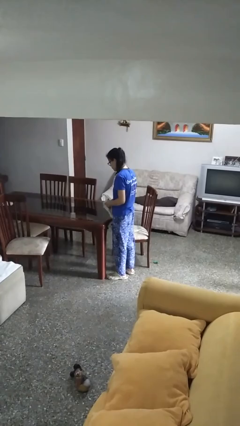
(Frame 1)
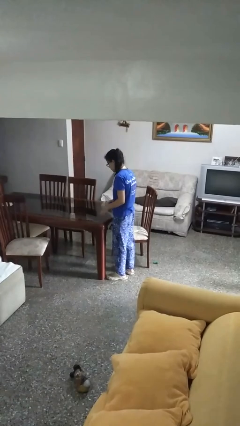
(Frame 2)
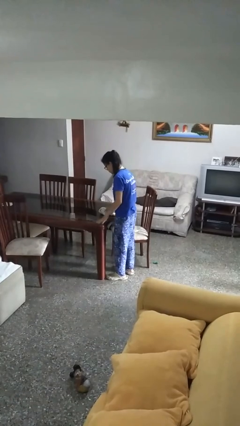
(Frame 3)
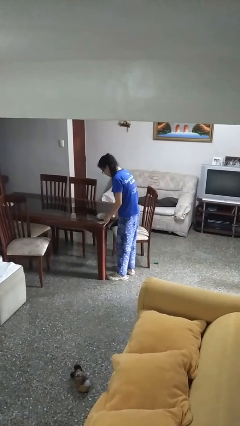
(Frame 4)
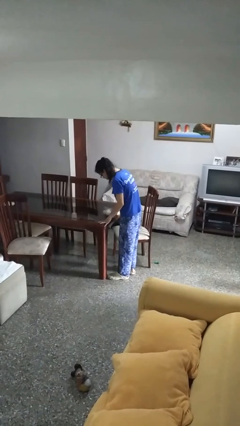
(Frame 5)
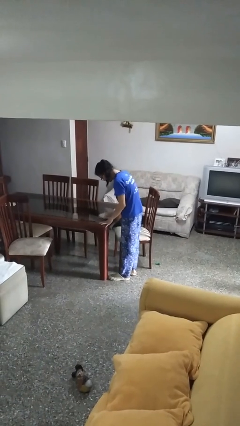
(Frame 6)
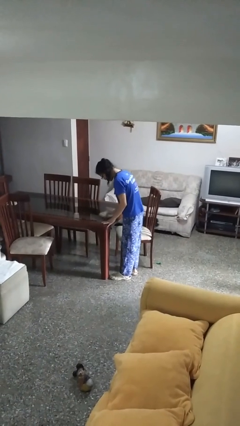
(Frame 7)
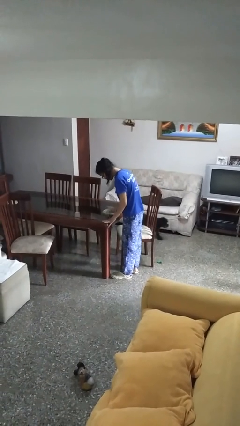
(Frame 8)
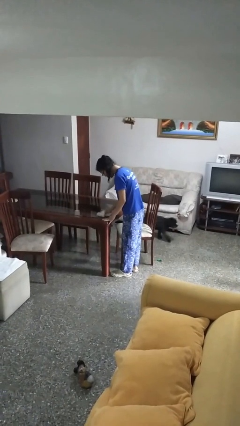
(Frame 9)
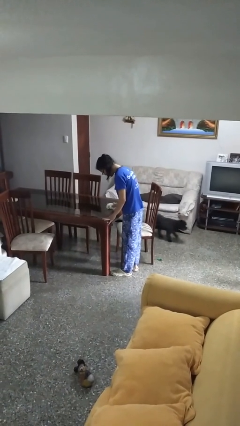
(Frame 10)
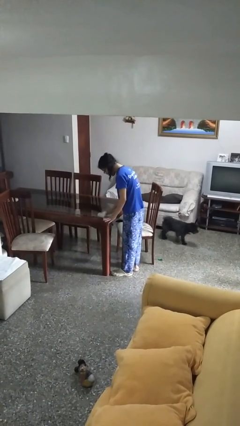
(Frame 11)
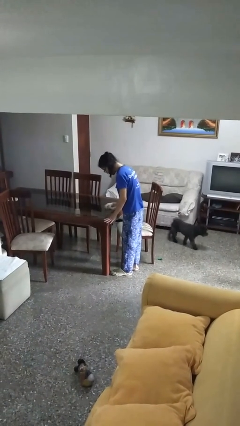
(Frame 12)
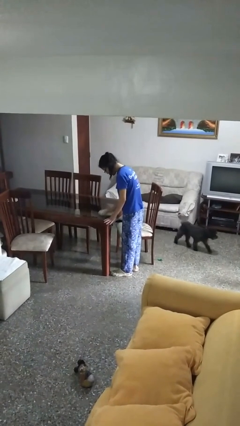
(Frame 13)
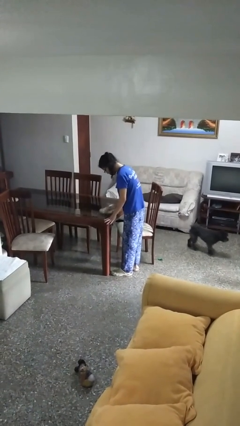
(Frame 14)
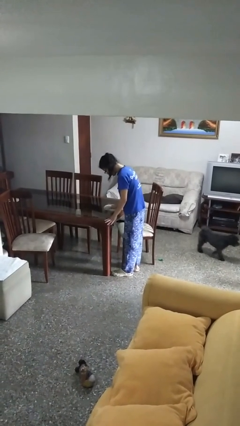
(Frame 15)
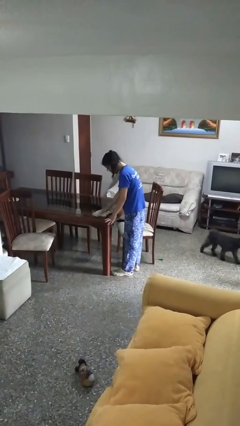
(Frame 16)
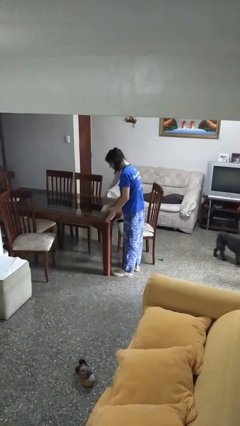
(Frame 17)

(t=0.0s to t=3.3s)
person cleans table with rag

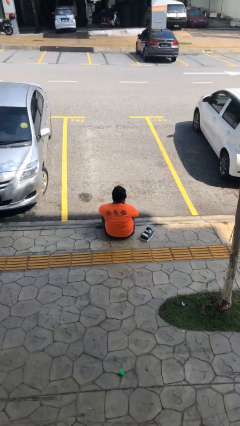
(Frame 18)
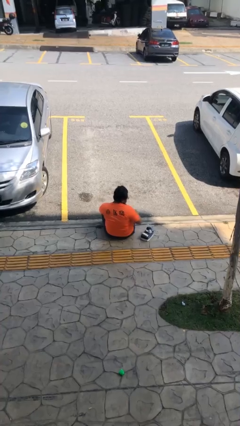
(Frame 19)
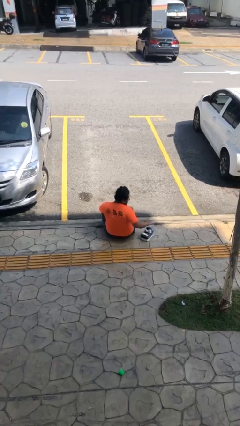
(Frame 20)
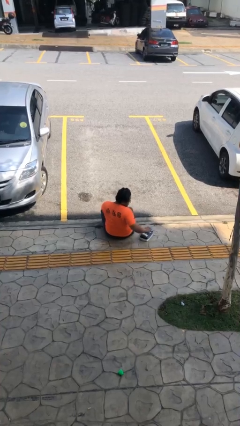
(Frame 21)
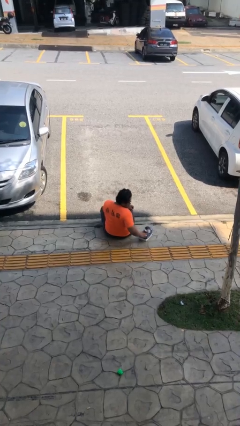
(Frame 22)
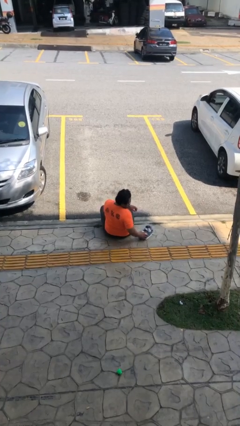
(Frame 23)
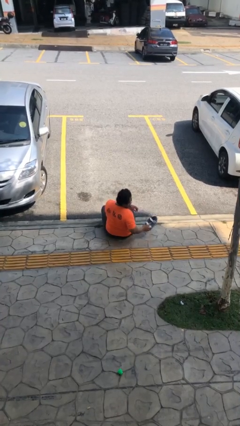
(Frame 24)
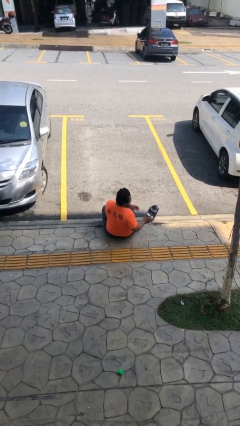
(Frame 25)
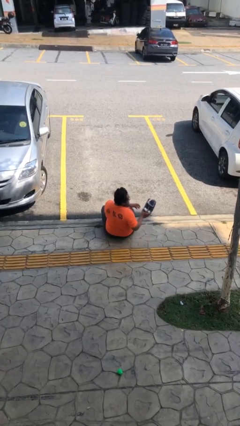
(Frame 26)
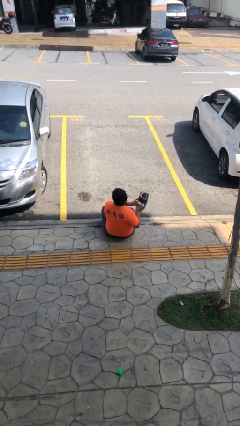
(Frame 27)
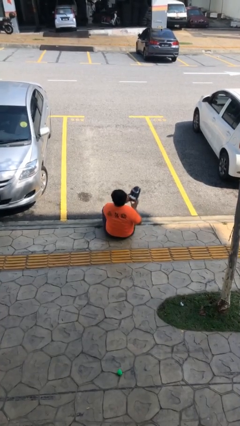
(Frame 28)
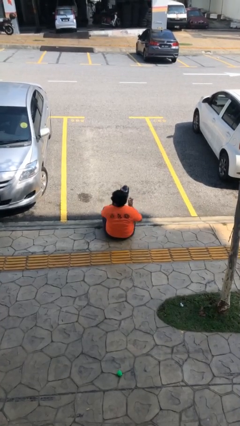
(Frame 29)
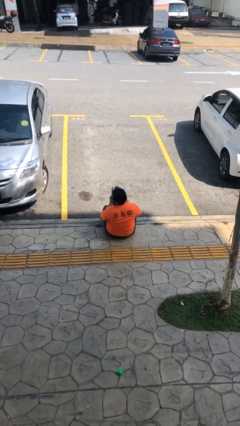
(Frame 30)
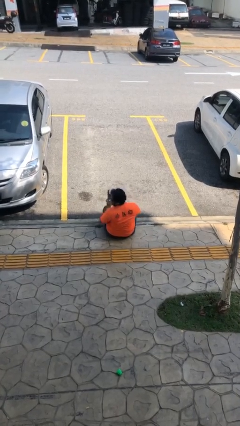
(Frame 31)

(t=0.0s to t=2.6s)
person picks up object from floor

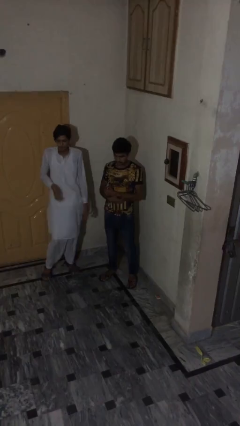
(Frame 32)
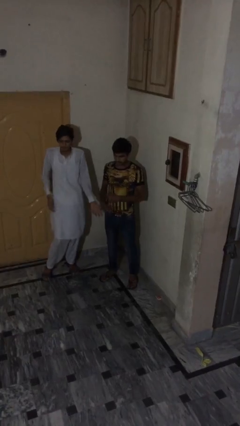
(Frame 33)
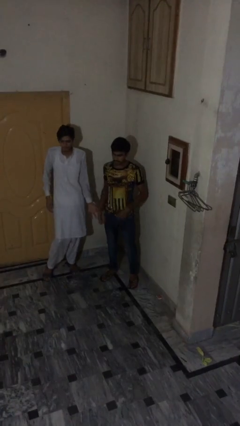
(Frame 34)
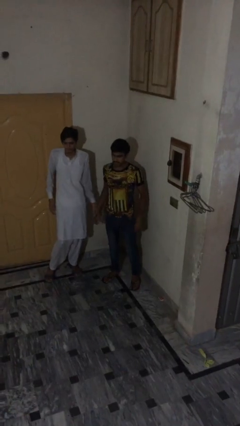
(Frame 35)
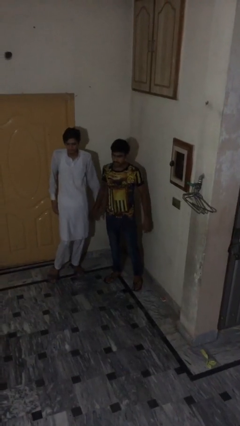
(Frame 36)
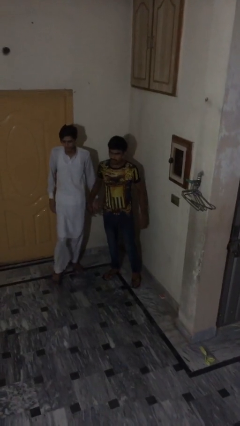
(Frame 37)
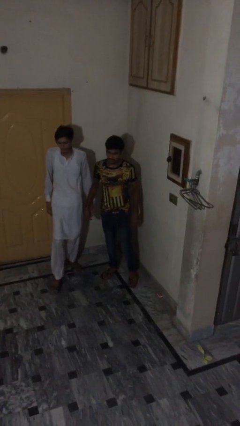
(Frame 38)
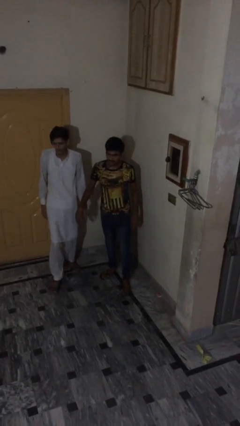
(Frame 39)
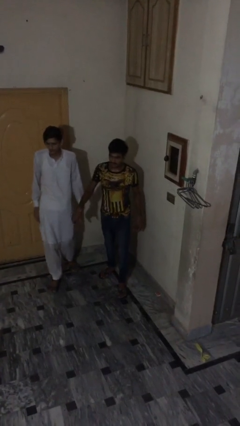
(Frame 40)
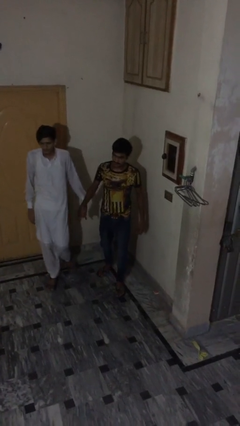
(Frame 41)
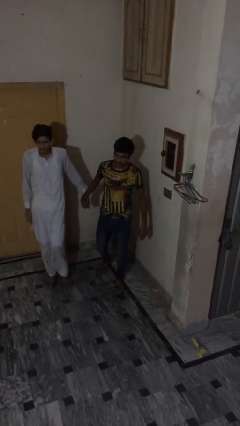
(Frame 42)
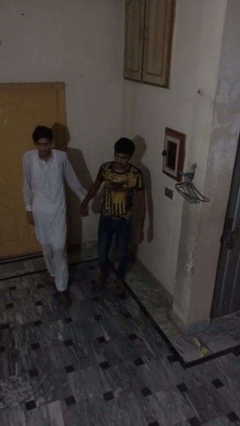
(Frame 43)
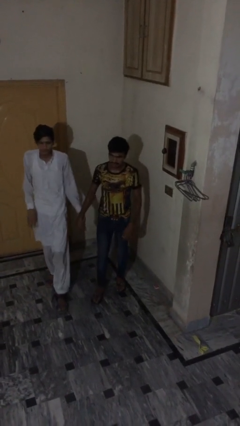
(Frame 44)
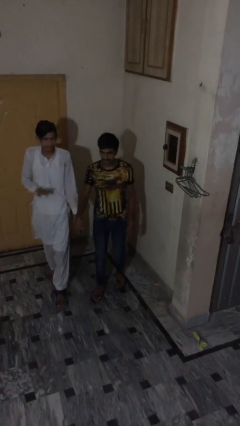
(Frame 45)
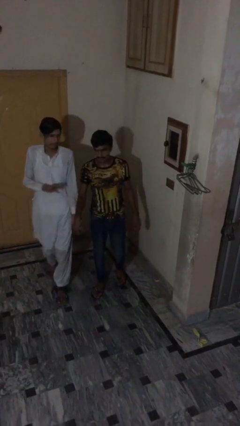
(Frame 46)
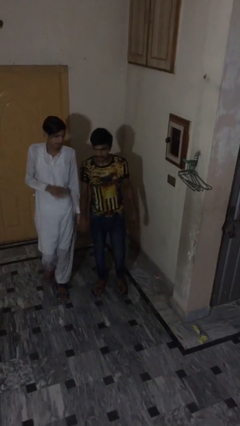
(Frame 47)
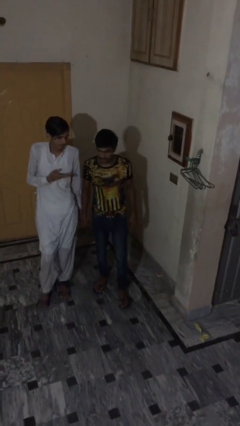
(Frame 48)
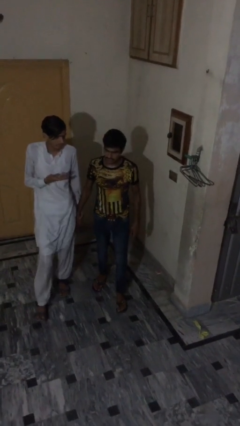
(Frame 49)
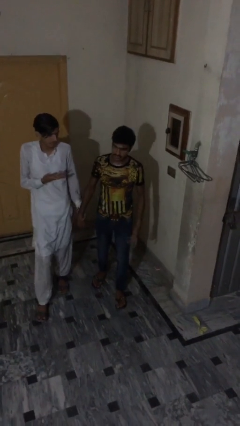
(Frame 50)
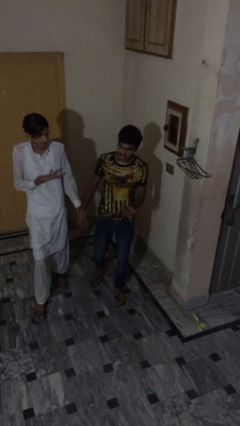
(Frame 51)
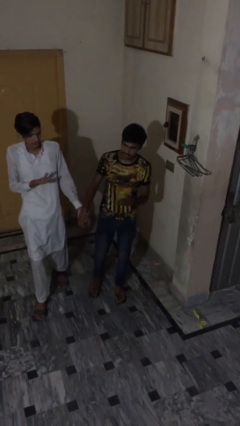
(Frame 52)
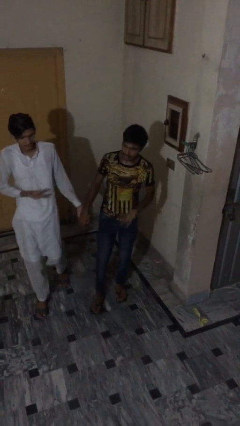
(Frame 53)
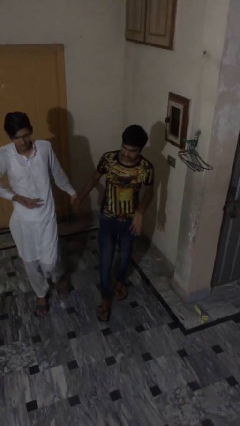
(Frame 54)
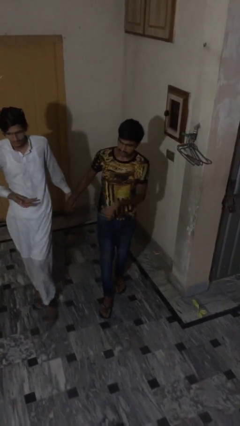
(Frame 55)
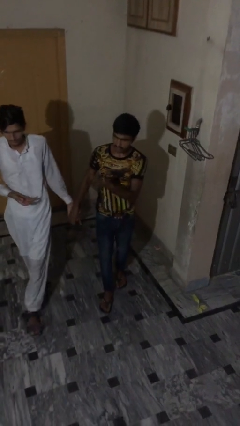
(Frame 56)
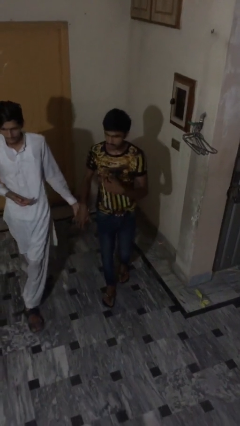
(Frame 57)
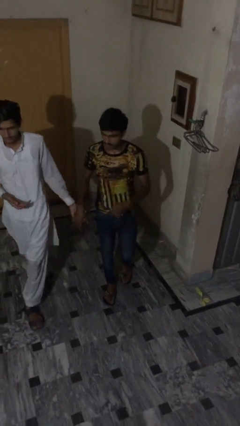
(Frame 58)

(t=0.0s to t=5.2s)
person holds hand

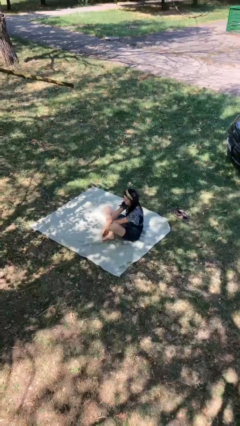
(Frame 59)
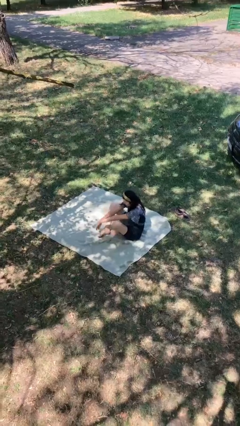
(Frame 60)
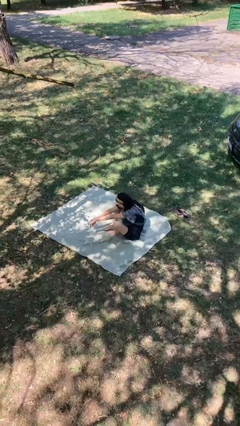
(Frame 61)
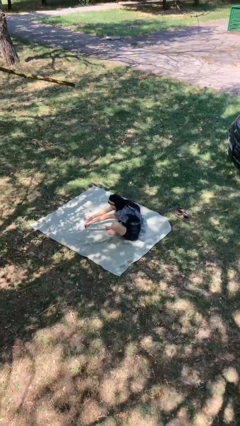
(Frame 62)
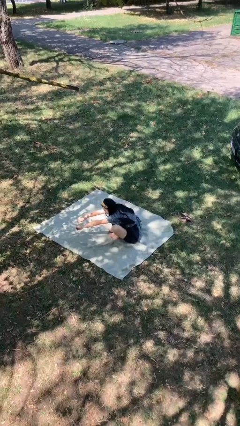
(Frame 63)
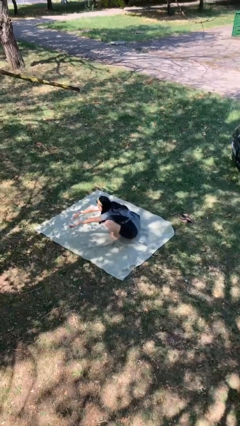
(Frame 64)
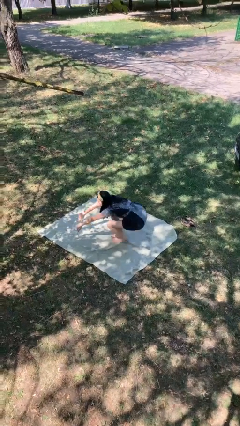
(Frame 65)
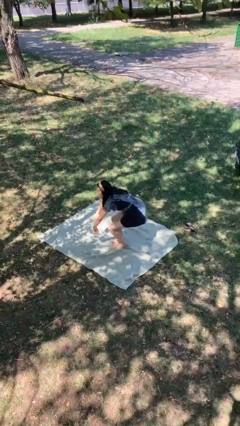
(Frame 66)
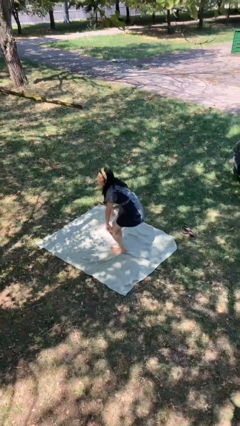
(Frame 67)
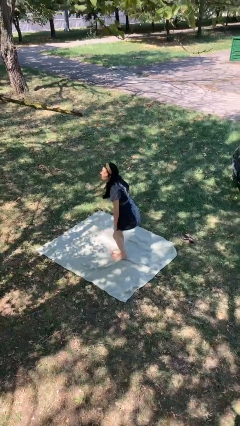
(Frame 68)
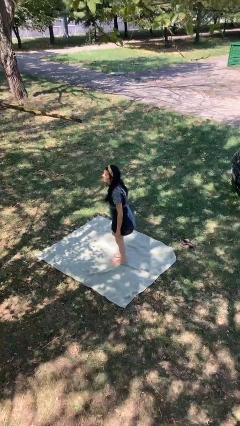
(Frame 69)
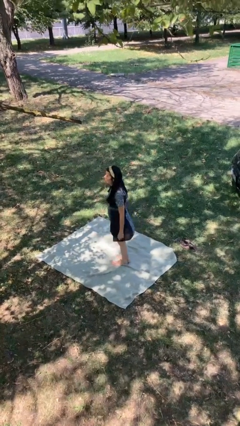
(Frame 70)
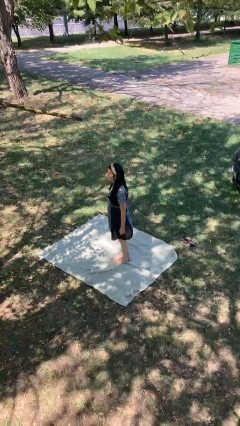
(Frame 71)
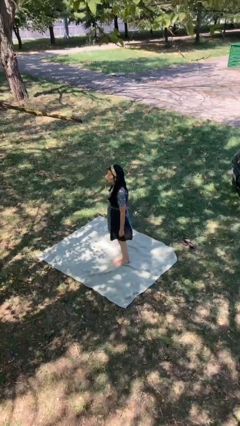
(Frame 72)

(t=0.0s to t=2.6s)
person stands up from floor

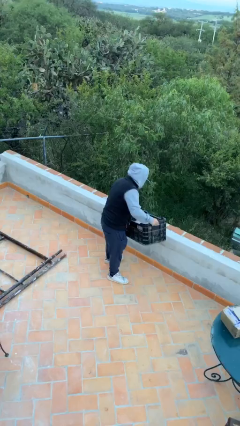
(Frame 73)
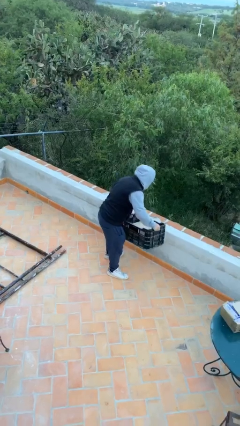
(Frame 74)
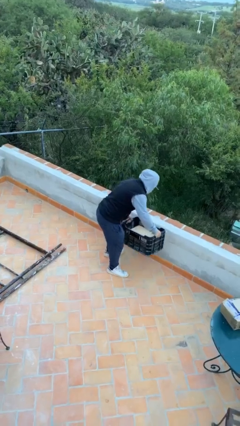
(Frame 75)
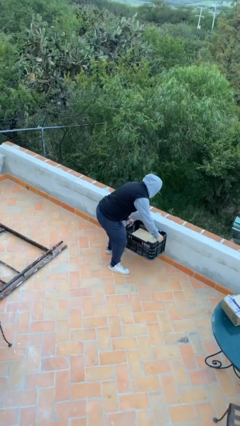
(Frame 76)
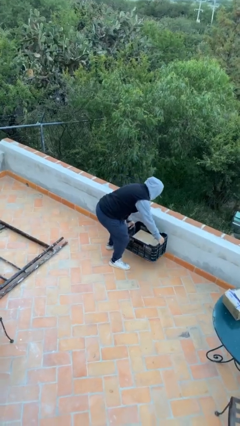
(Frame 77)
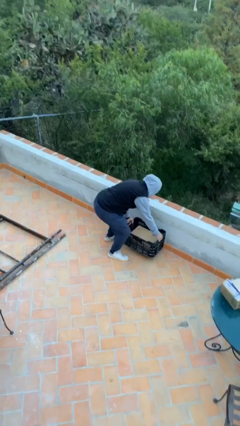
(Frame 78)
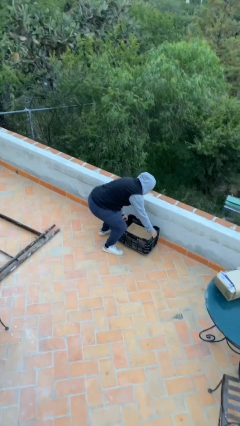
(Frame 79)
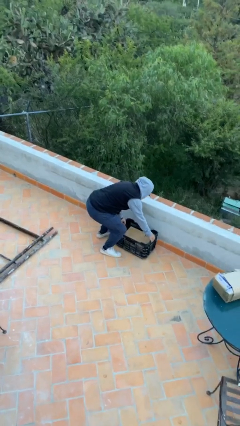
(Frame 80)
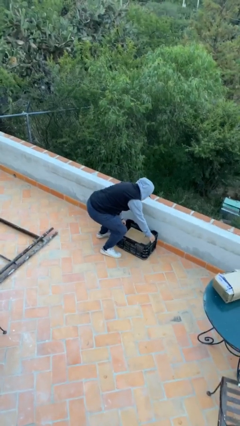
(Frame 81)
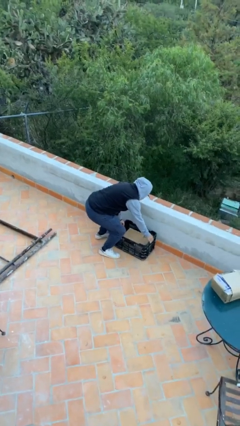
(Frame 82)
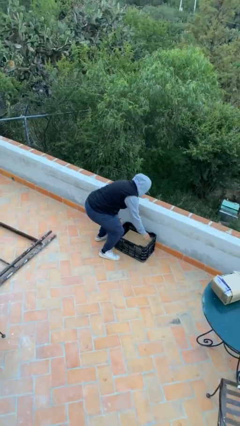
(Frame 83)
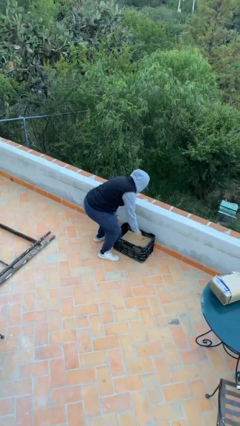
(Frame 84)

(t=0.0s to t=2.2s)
person puts down object on floor

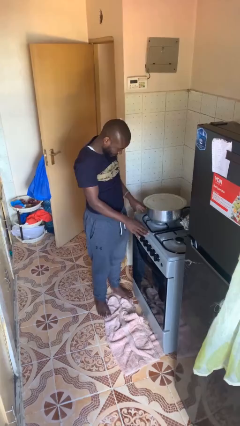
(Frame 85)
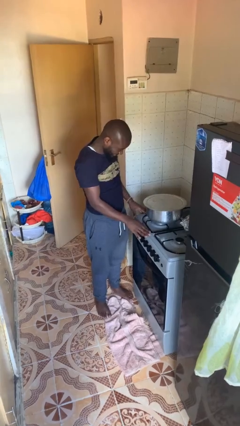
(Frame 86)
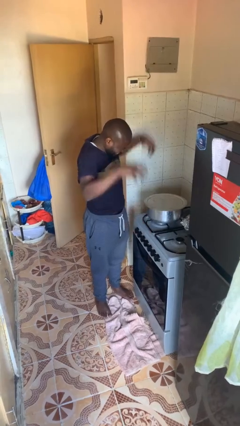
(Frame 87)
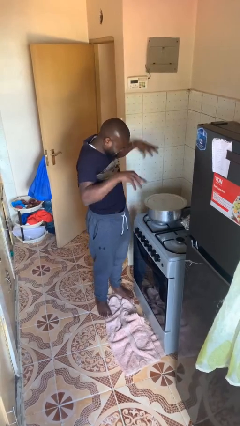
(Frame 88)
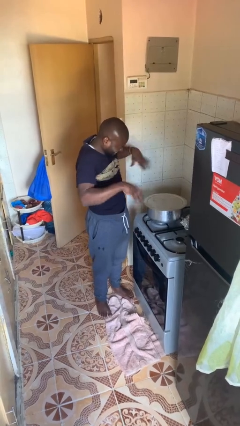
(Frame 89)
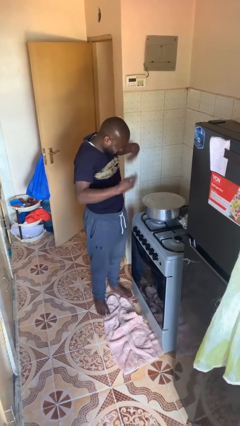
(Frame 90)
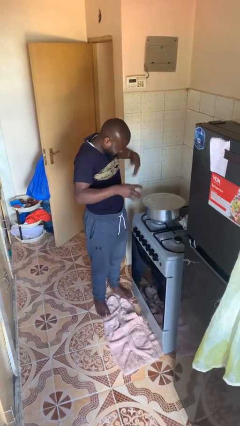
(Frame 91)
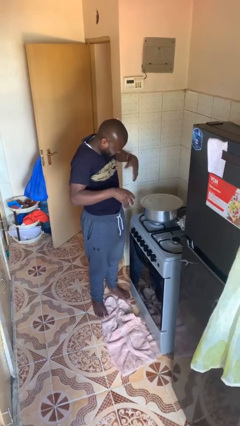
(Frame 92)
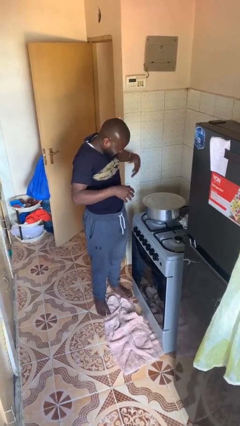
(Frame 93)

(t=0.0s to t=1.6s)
person burns hand
